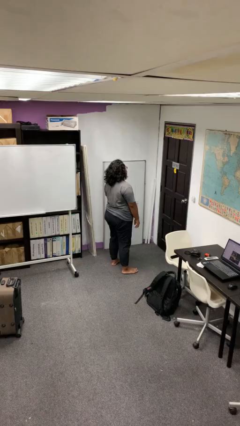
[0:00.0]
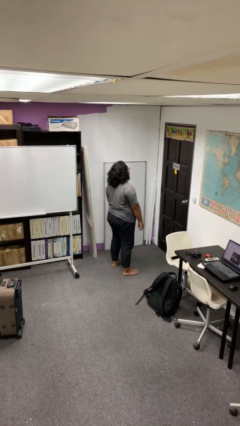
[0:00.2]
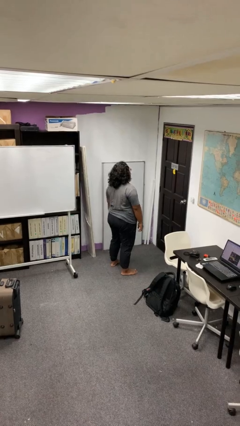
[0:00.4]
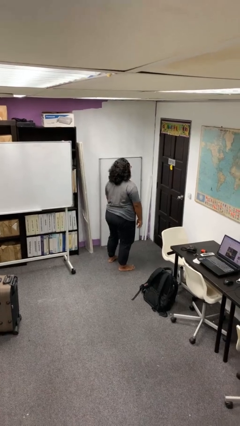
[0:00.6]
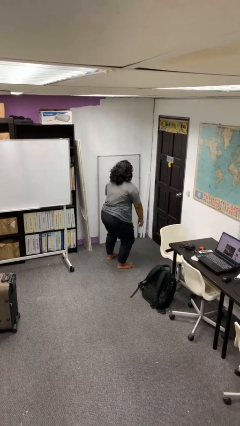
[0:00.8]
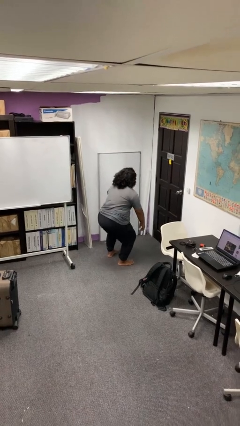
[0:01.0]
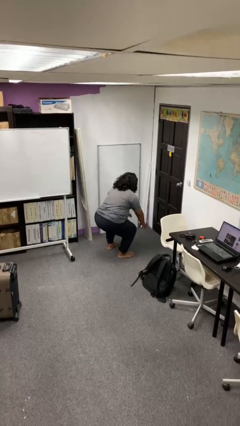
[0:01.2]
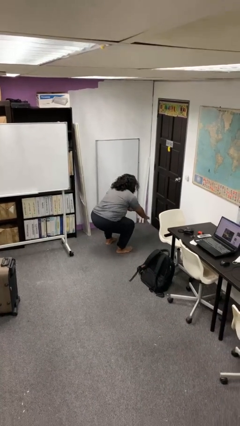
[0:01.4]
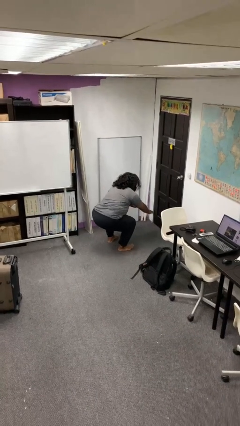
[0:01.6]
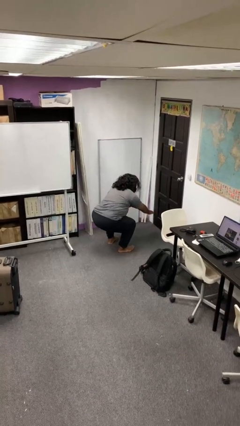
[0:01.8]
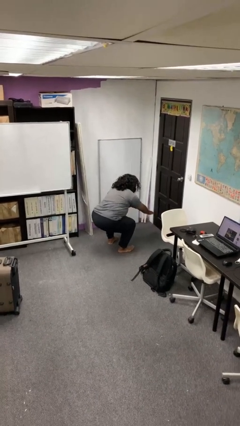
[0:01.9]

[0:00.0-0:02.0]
person squats

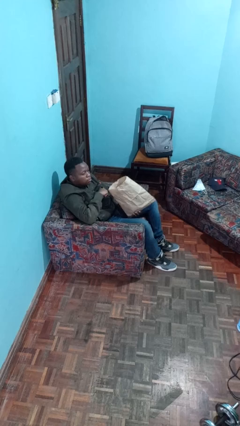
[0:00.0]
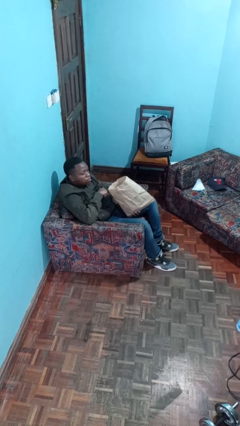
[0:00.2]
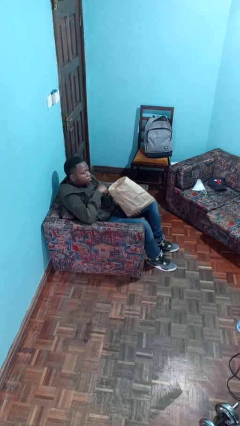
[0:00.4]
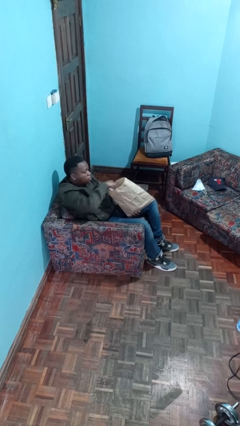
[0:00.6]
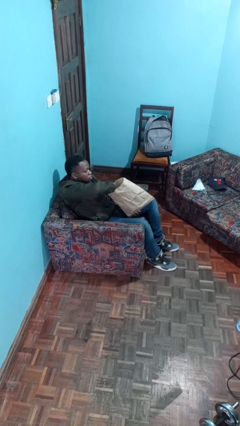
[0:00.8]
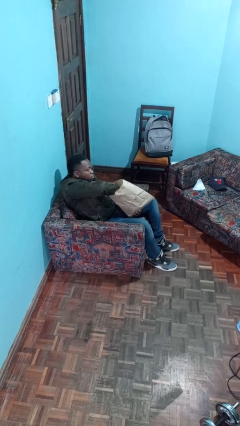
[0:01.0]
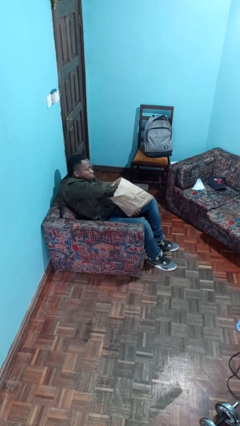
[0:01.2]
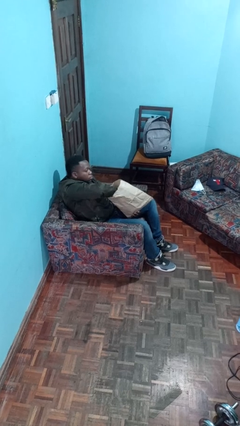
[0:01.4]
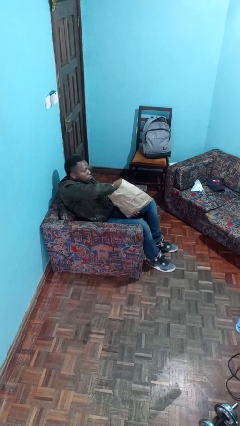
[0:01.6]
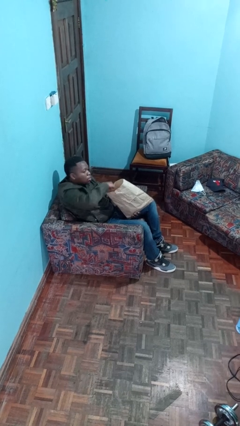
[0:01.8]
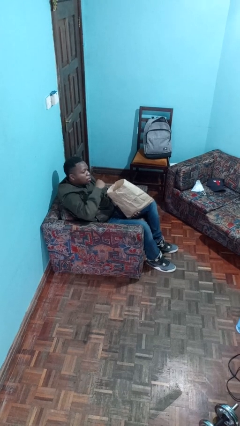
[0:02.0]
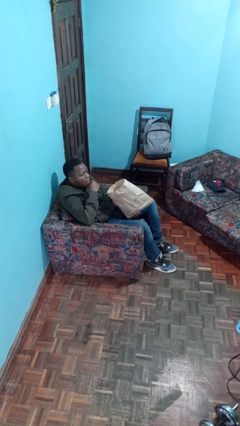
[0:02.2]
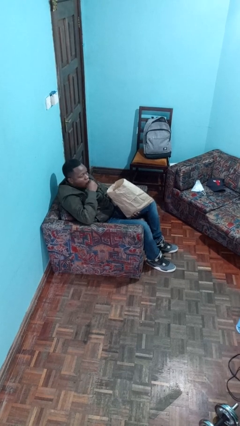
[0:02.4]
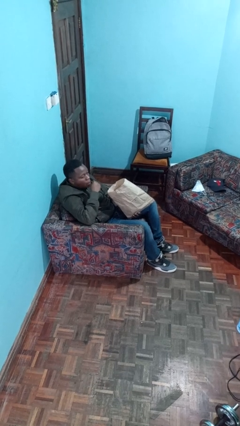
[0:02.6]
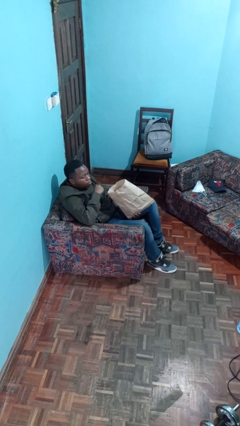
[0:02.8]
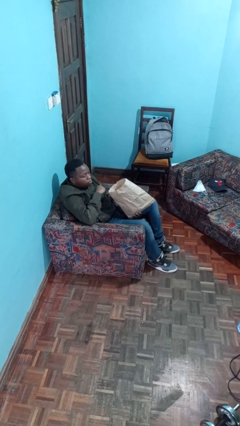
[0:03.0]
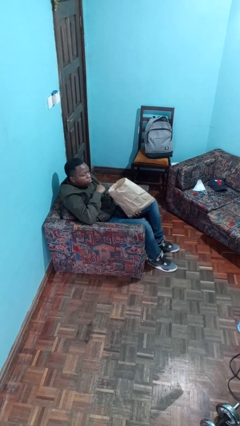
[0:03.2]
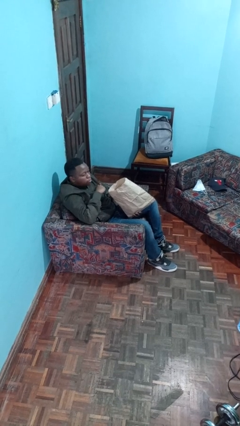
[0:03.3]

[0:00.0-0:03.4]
person eats snack from bag

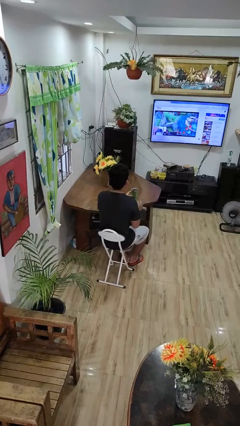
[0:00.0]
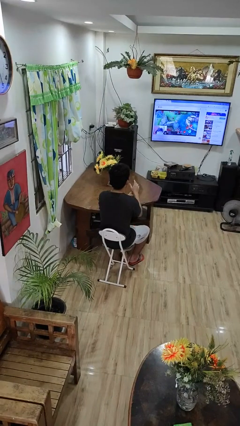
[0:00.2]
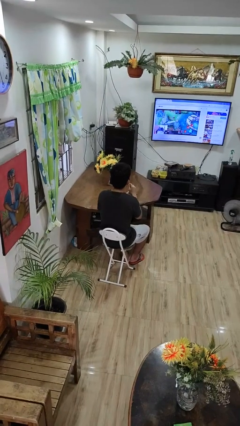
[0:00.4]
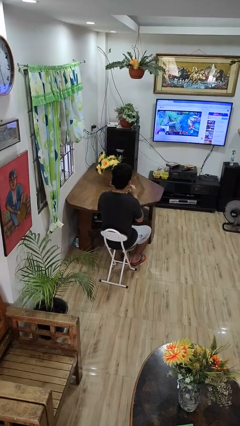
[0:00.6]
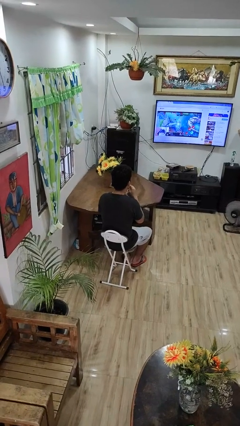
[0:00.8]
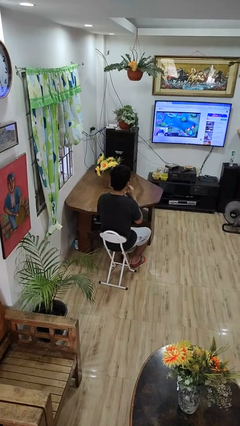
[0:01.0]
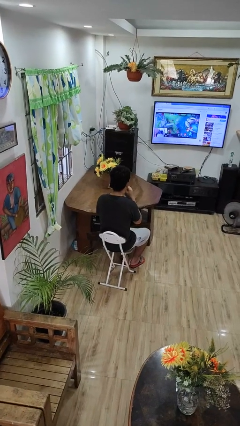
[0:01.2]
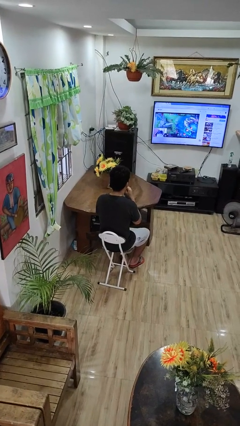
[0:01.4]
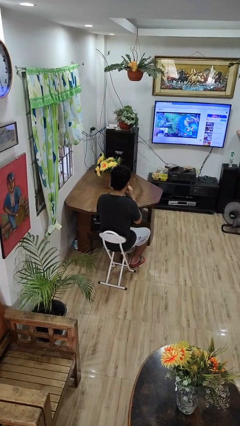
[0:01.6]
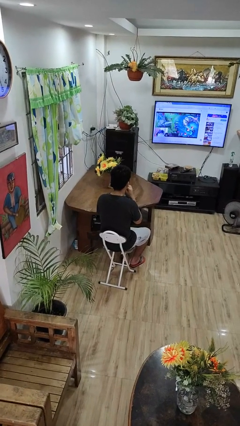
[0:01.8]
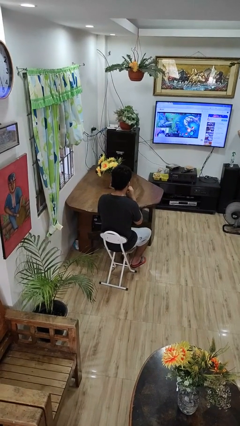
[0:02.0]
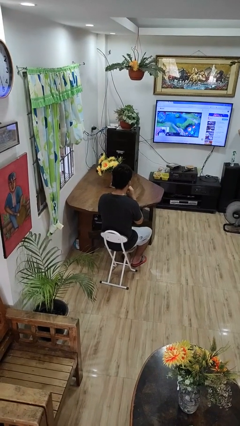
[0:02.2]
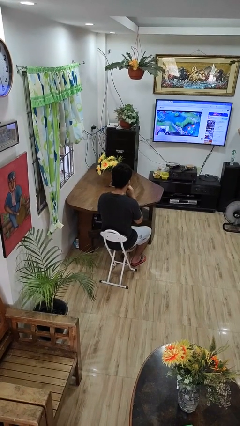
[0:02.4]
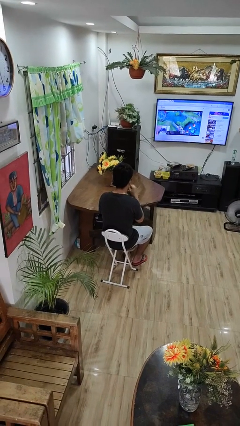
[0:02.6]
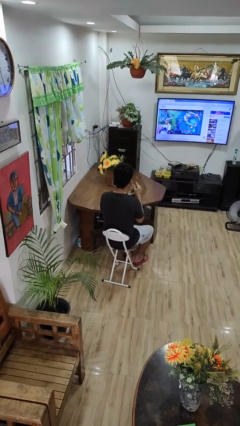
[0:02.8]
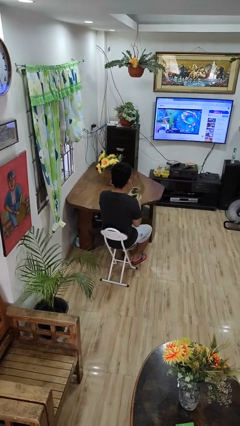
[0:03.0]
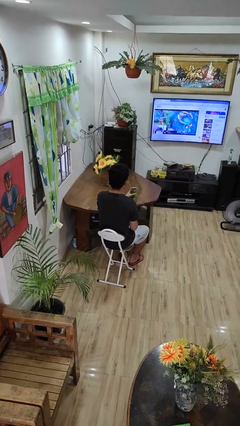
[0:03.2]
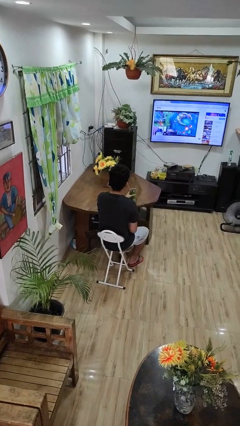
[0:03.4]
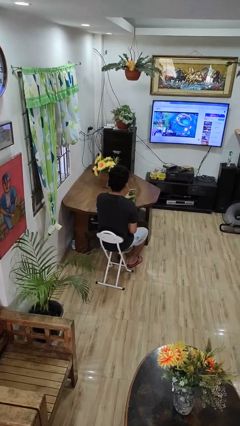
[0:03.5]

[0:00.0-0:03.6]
person drinks from straw

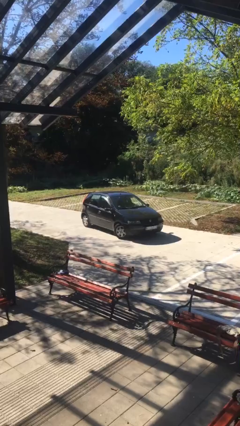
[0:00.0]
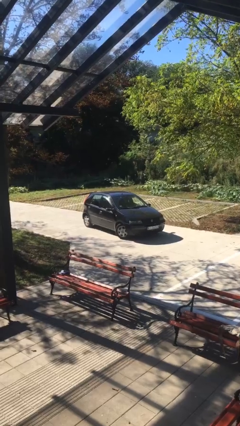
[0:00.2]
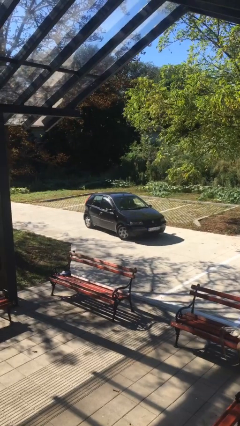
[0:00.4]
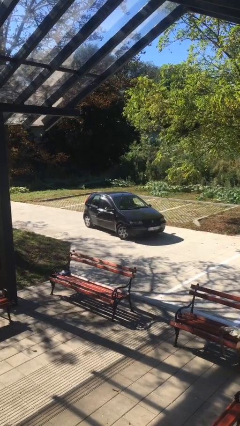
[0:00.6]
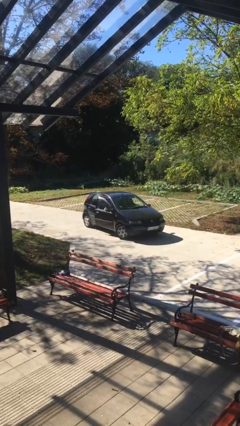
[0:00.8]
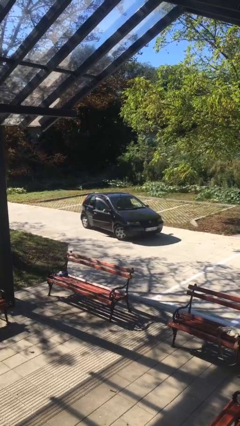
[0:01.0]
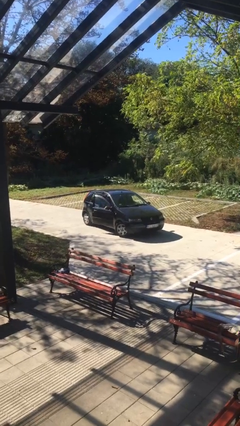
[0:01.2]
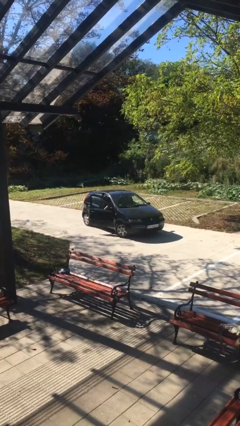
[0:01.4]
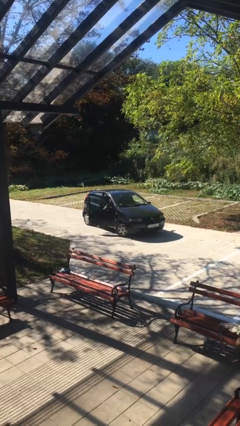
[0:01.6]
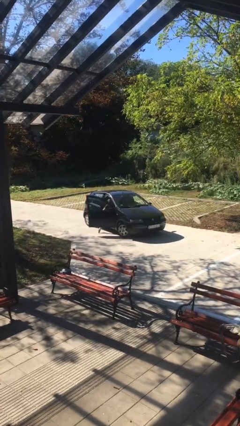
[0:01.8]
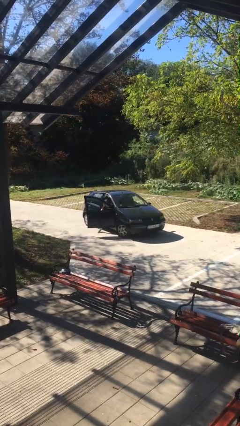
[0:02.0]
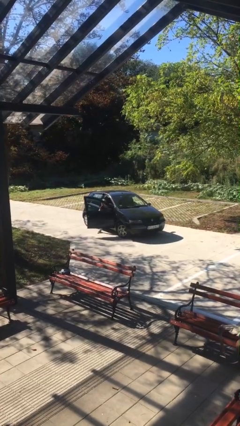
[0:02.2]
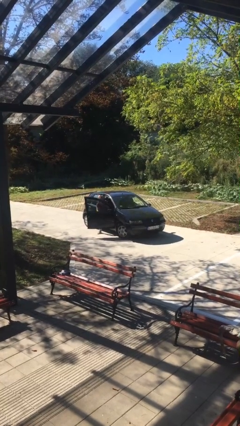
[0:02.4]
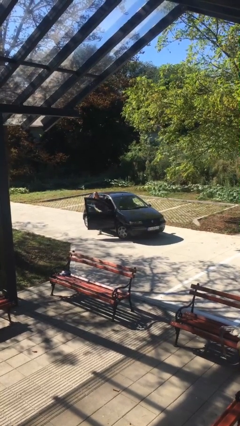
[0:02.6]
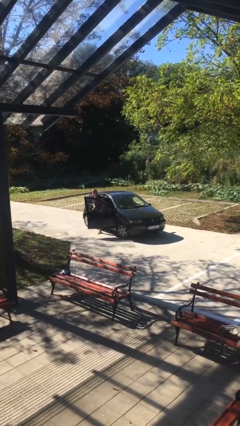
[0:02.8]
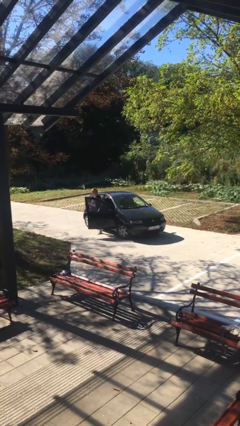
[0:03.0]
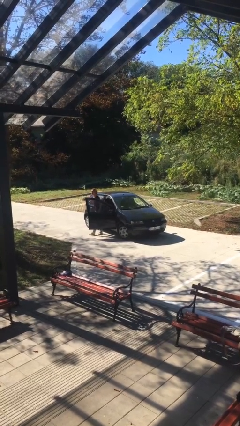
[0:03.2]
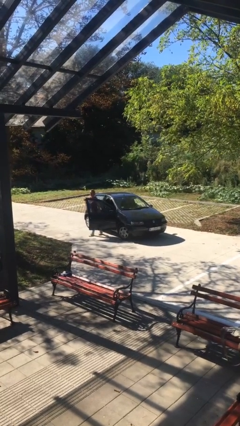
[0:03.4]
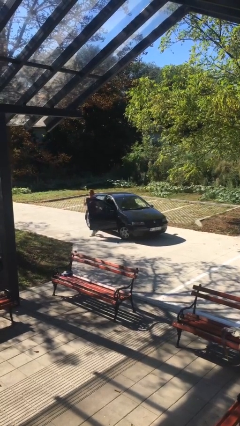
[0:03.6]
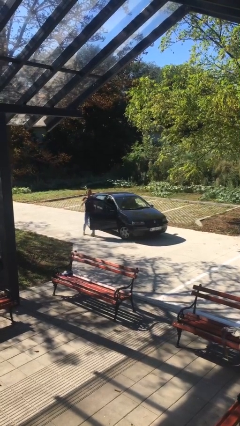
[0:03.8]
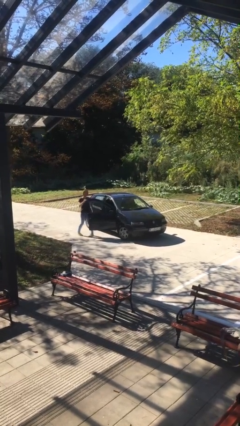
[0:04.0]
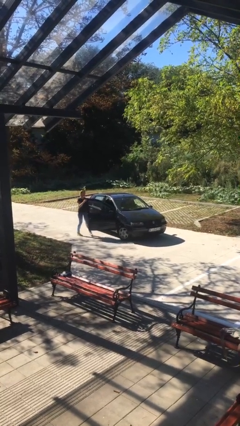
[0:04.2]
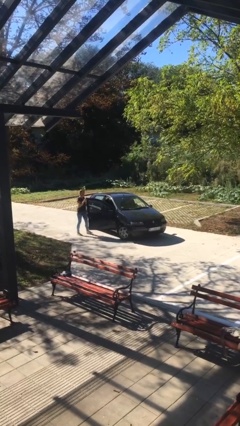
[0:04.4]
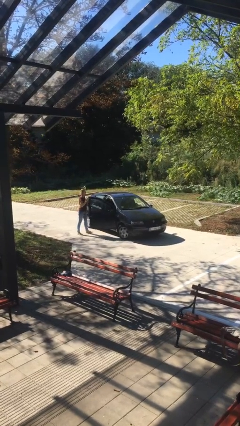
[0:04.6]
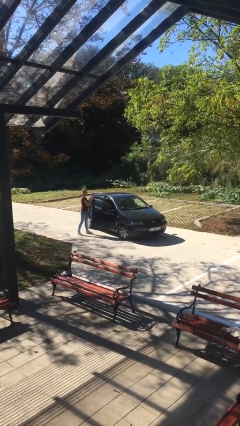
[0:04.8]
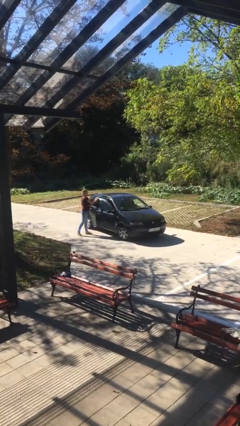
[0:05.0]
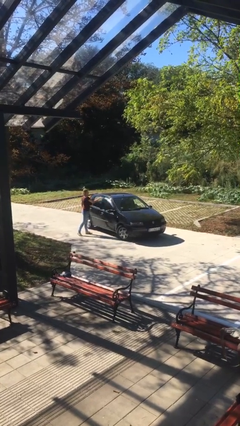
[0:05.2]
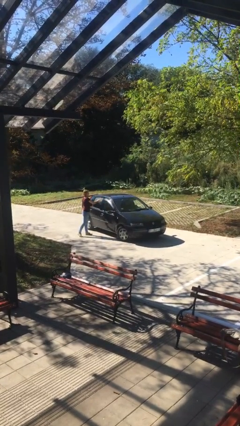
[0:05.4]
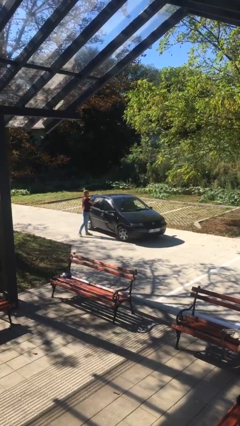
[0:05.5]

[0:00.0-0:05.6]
car drops off person

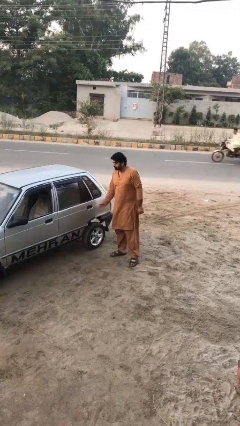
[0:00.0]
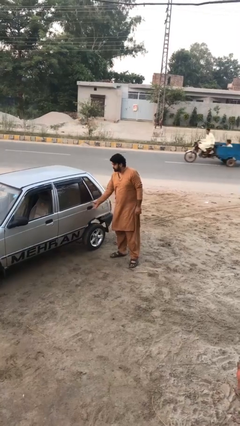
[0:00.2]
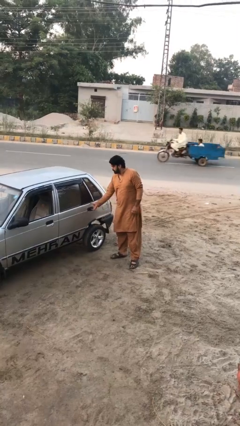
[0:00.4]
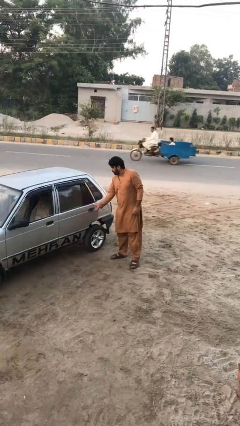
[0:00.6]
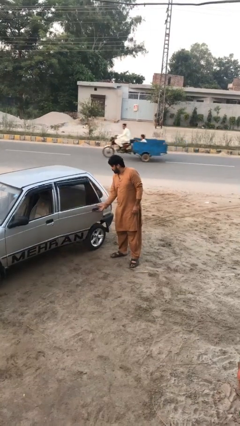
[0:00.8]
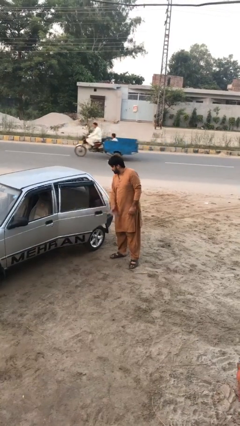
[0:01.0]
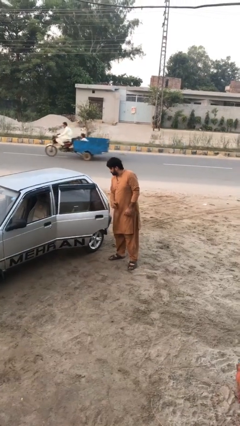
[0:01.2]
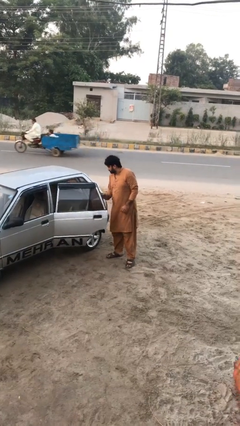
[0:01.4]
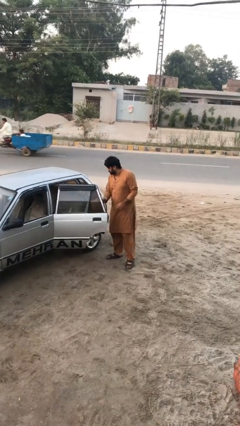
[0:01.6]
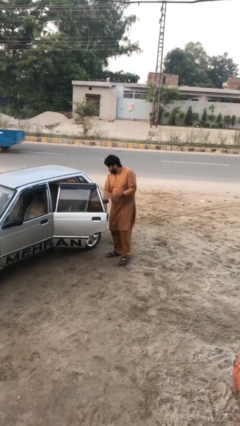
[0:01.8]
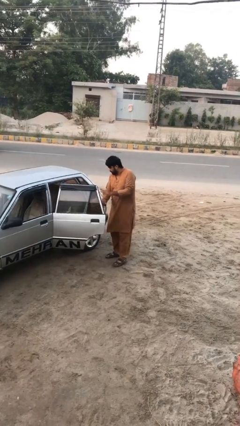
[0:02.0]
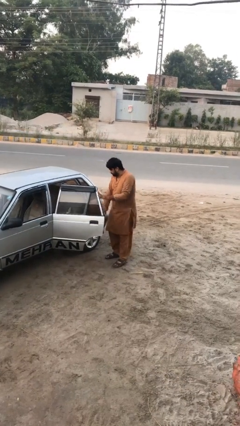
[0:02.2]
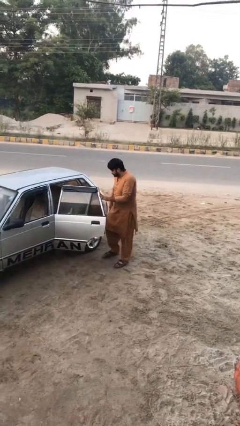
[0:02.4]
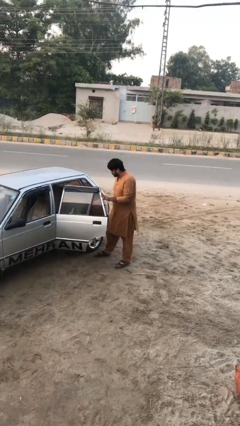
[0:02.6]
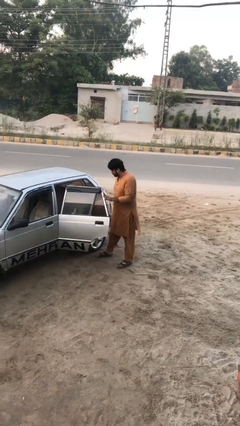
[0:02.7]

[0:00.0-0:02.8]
person opens car door
